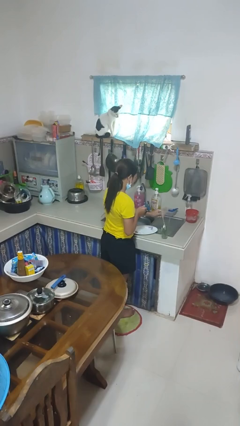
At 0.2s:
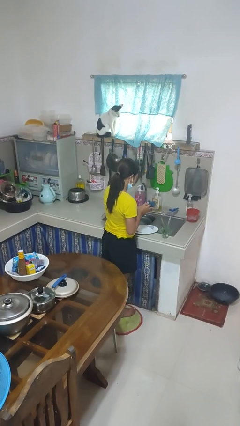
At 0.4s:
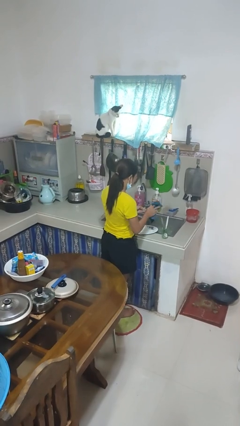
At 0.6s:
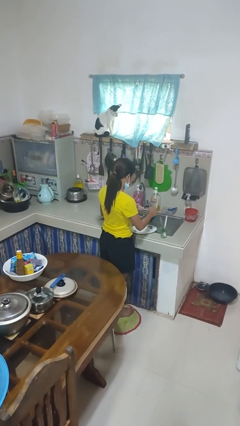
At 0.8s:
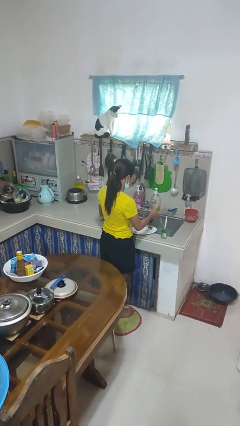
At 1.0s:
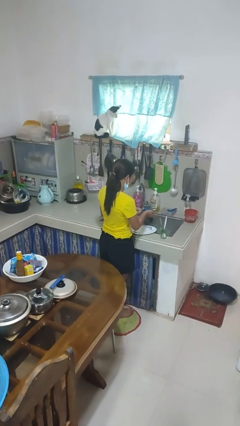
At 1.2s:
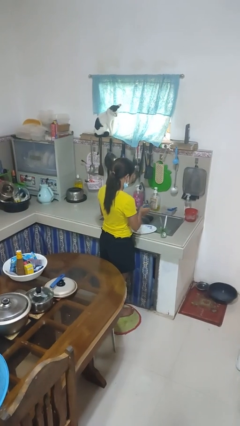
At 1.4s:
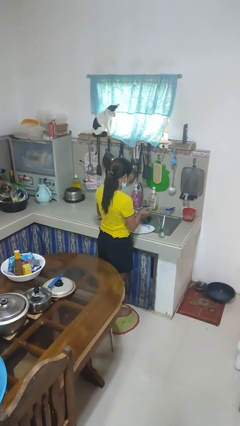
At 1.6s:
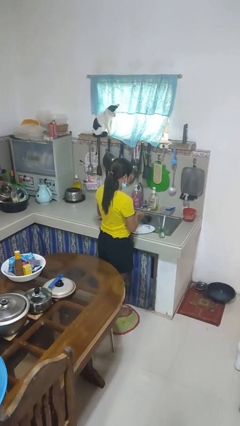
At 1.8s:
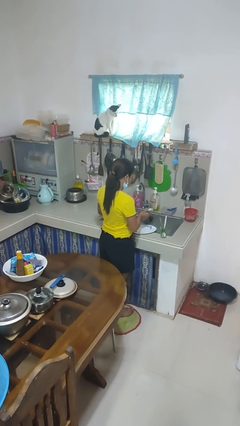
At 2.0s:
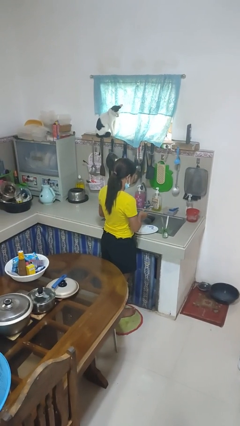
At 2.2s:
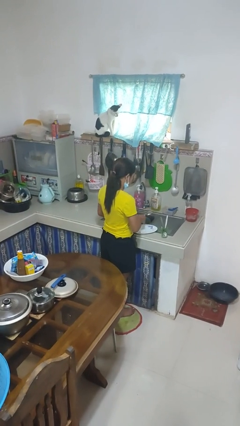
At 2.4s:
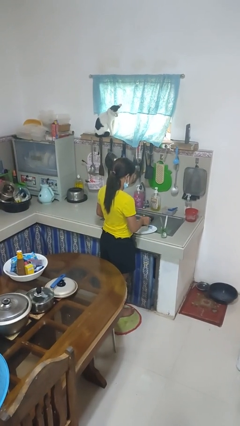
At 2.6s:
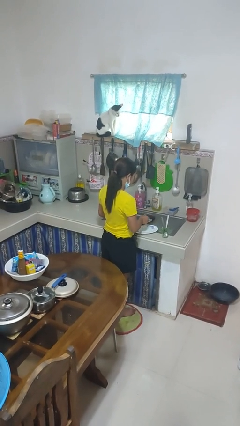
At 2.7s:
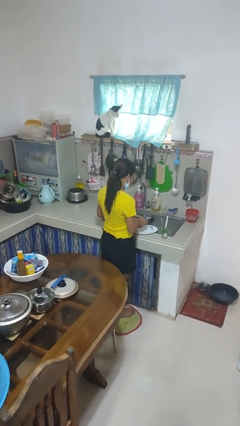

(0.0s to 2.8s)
person dries dish

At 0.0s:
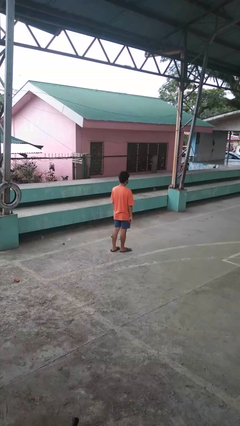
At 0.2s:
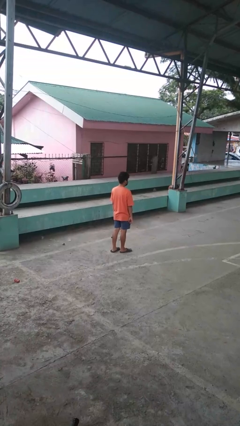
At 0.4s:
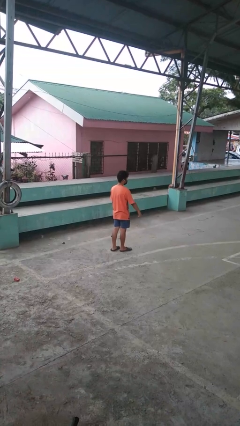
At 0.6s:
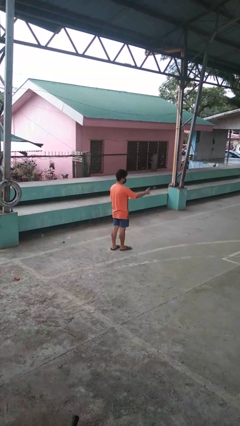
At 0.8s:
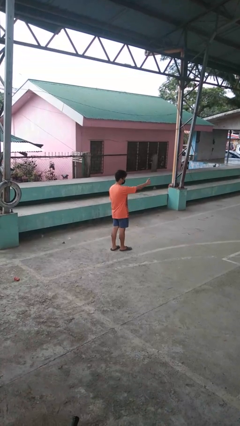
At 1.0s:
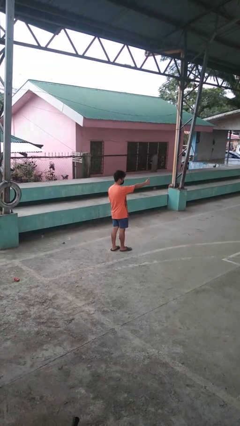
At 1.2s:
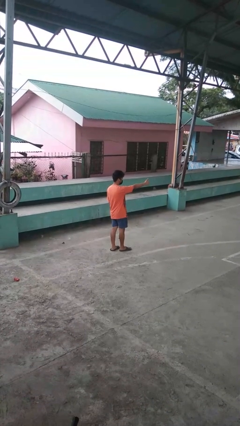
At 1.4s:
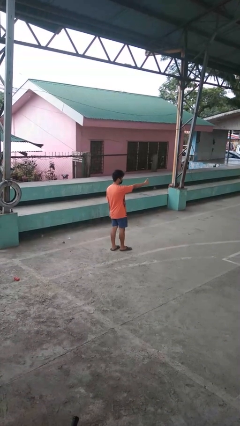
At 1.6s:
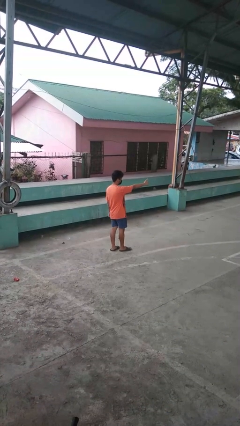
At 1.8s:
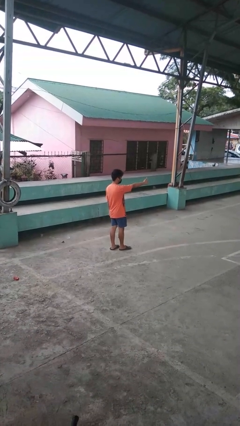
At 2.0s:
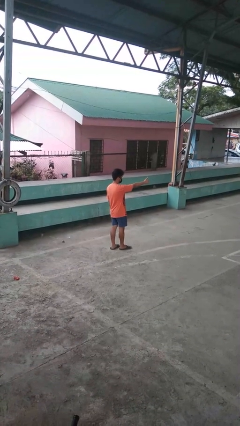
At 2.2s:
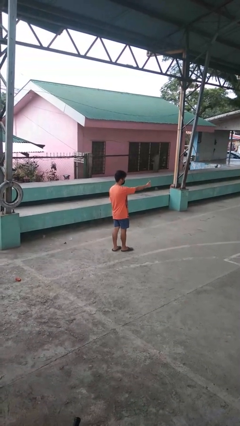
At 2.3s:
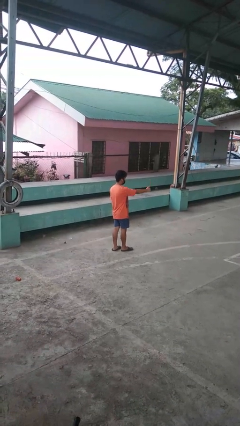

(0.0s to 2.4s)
person gestures thumbs up

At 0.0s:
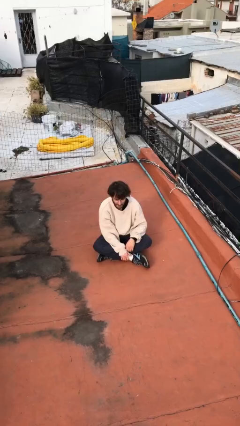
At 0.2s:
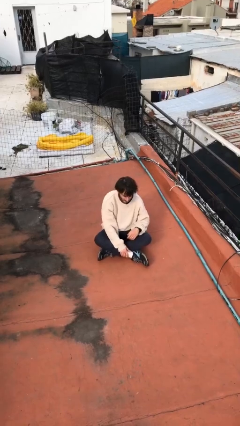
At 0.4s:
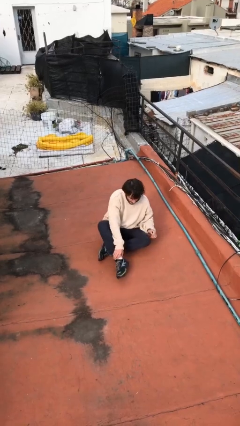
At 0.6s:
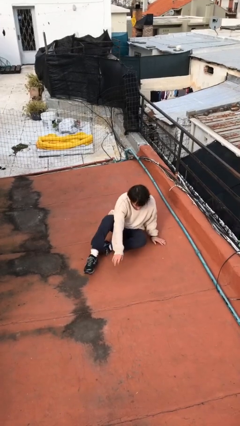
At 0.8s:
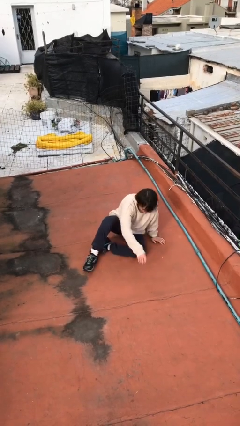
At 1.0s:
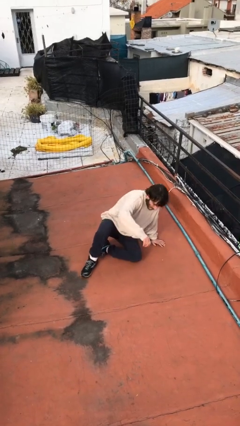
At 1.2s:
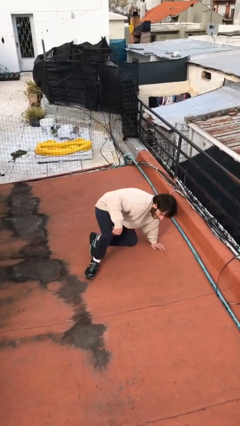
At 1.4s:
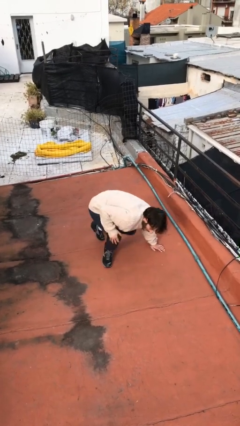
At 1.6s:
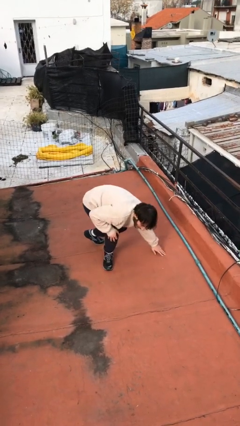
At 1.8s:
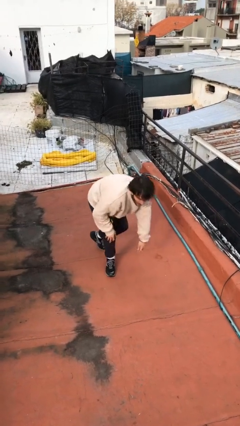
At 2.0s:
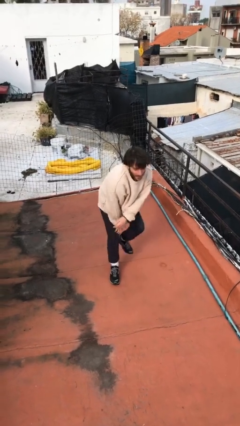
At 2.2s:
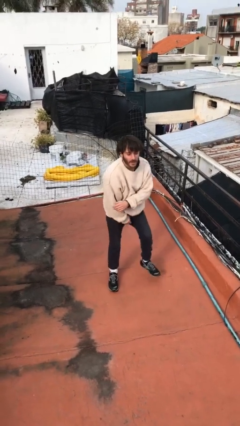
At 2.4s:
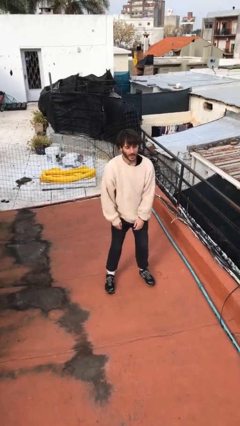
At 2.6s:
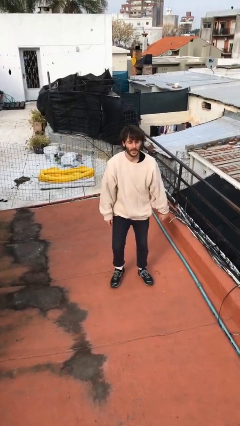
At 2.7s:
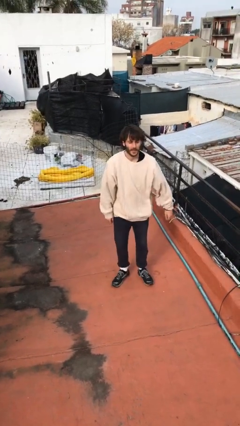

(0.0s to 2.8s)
person stands up from floor

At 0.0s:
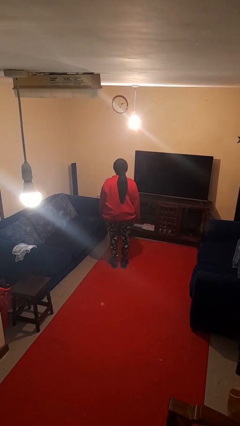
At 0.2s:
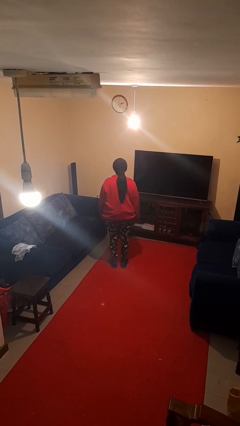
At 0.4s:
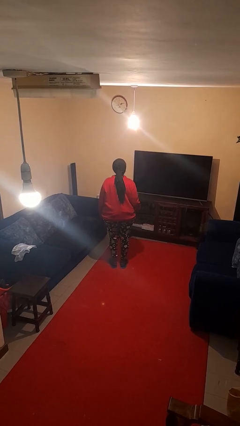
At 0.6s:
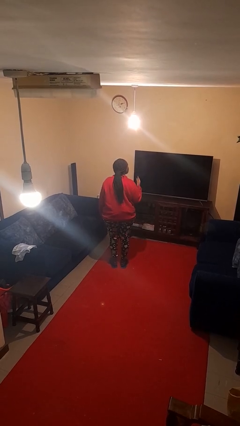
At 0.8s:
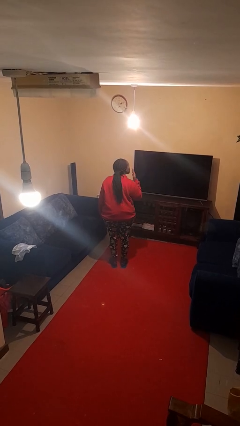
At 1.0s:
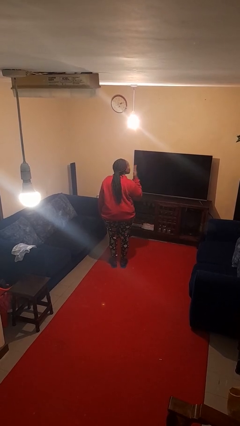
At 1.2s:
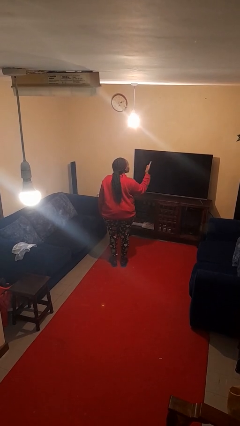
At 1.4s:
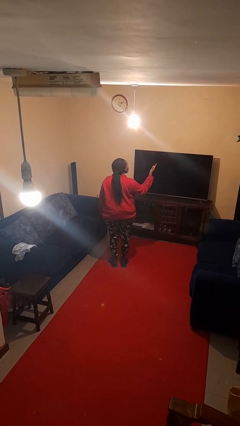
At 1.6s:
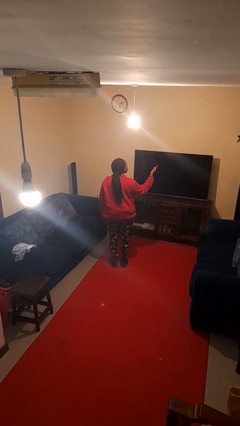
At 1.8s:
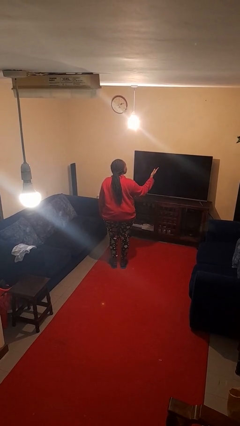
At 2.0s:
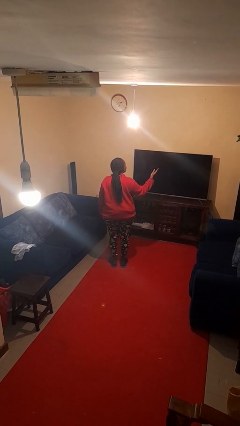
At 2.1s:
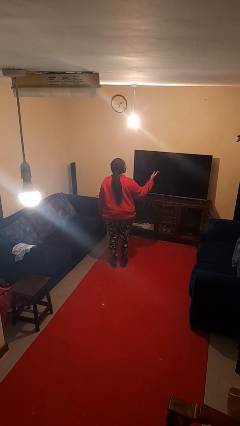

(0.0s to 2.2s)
person gestures blow kiss

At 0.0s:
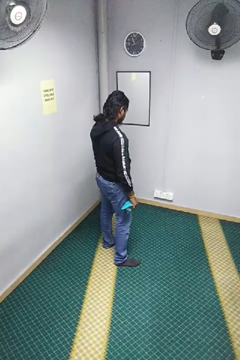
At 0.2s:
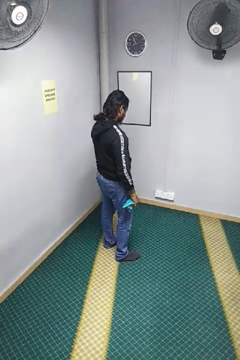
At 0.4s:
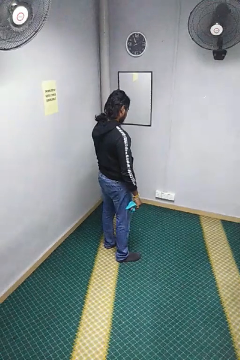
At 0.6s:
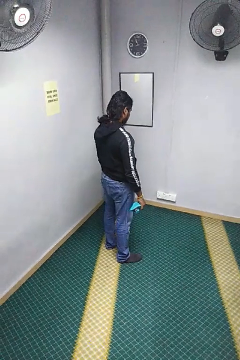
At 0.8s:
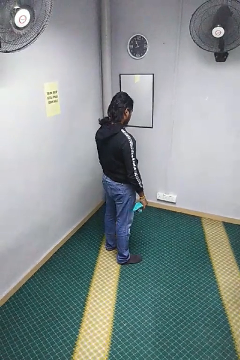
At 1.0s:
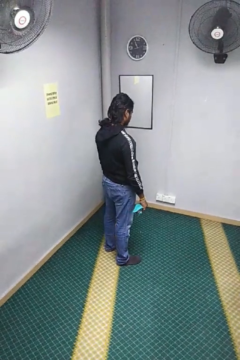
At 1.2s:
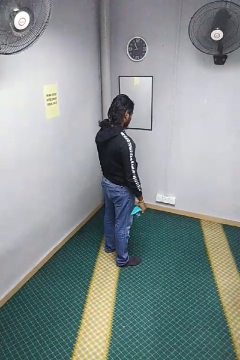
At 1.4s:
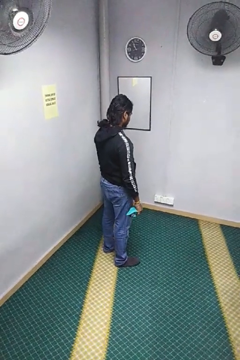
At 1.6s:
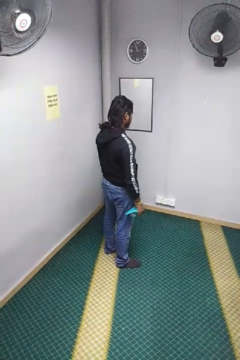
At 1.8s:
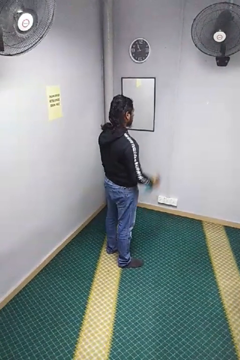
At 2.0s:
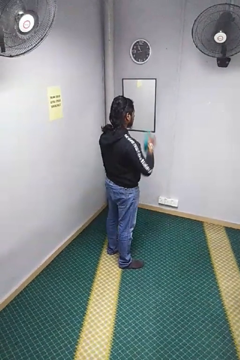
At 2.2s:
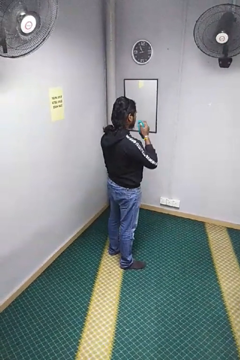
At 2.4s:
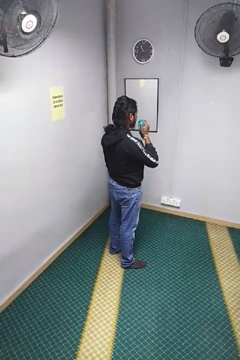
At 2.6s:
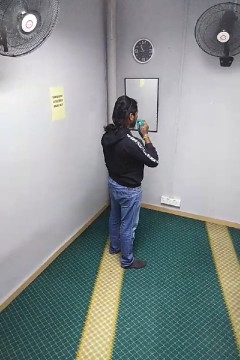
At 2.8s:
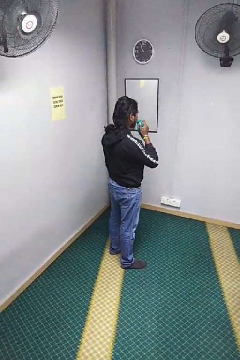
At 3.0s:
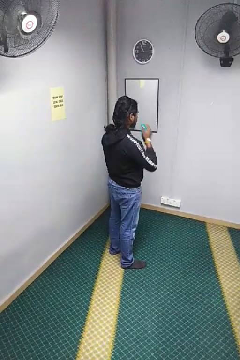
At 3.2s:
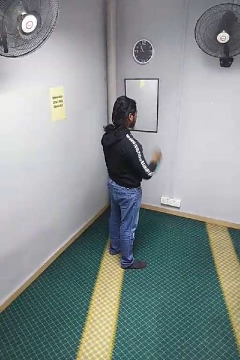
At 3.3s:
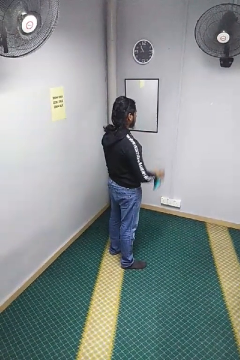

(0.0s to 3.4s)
person wipes mouth with napkin

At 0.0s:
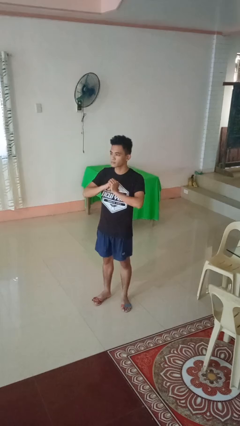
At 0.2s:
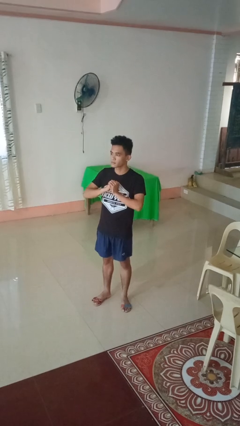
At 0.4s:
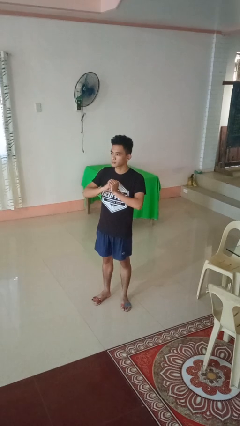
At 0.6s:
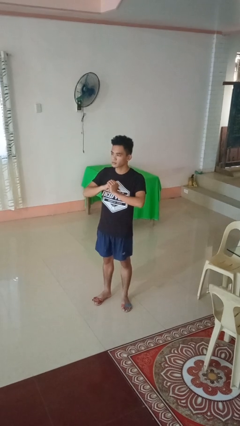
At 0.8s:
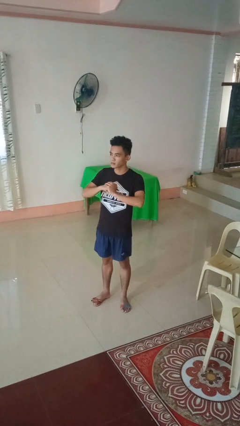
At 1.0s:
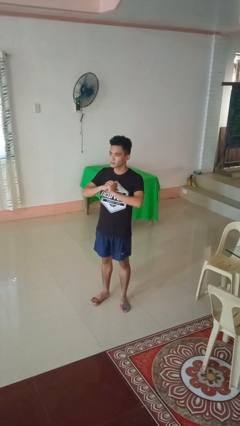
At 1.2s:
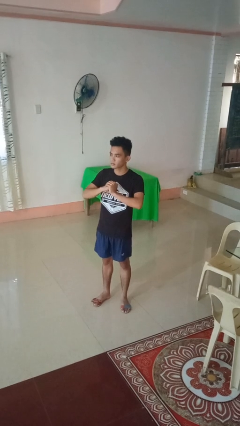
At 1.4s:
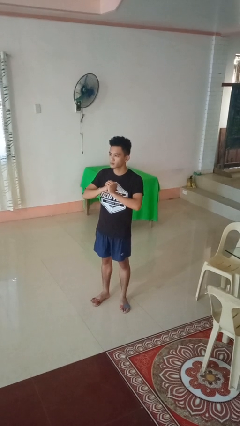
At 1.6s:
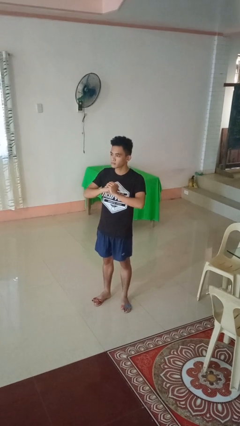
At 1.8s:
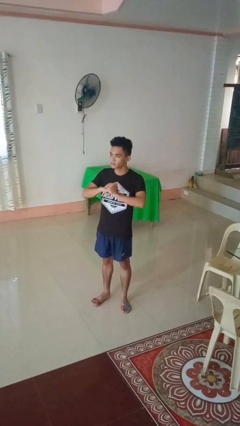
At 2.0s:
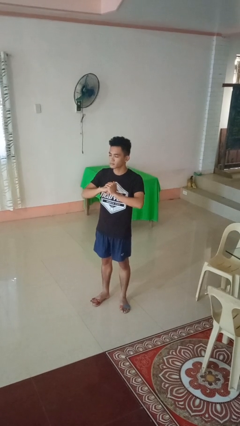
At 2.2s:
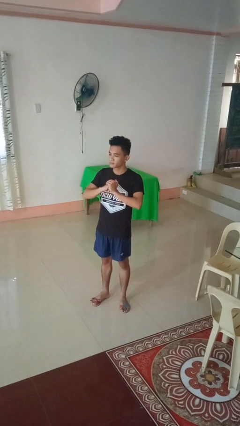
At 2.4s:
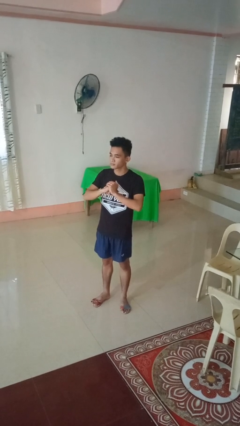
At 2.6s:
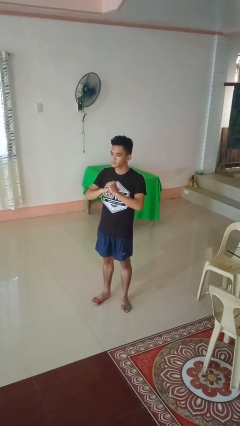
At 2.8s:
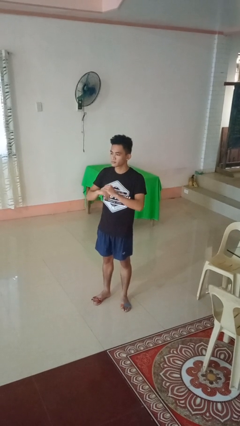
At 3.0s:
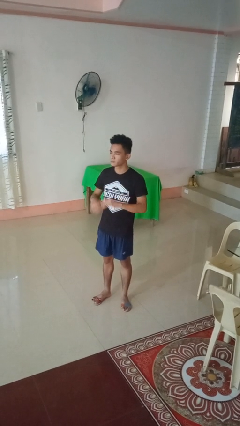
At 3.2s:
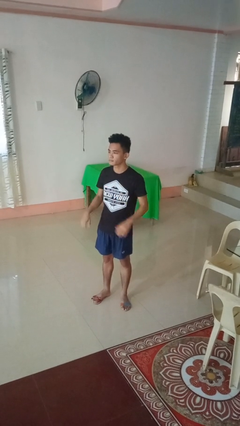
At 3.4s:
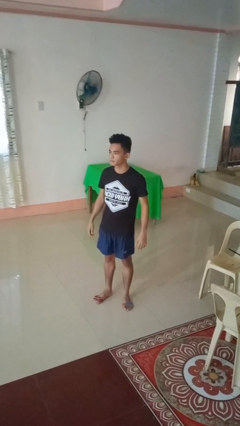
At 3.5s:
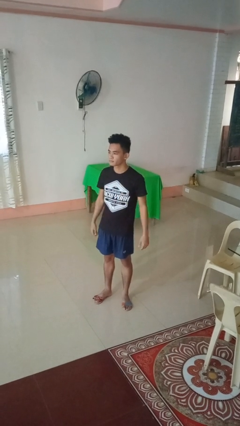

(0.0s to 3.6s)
person cracks knuckles

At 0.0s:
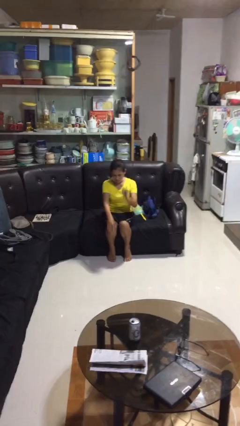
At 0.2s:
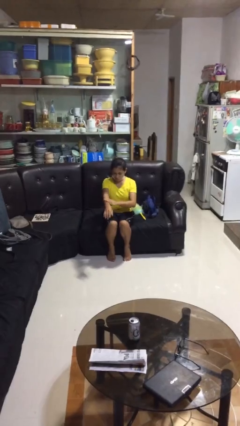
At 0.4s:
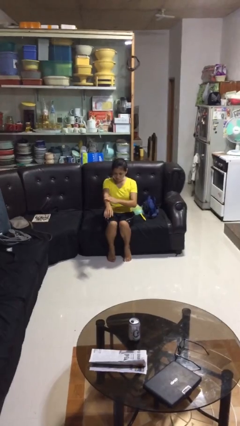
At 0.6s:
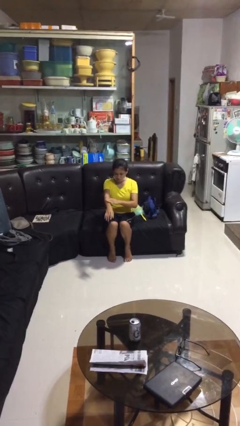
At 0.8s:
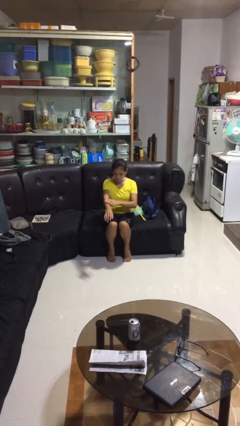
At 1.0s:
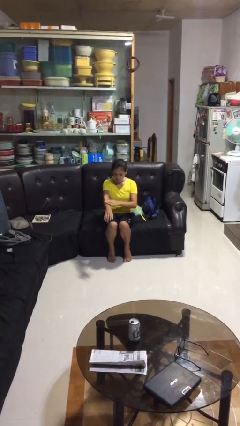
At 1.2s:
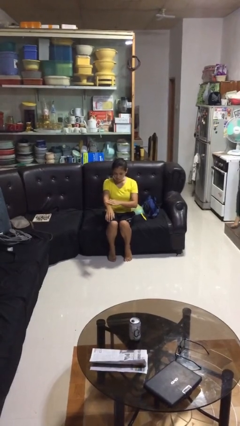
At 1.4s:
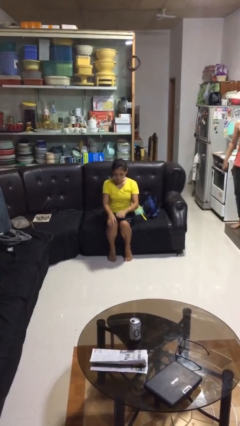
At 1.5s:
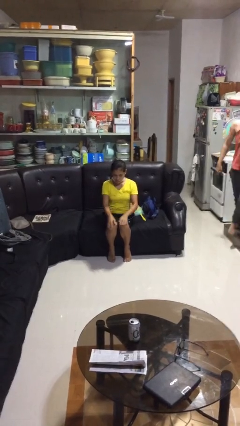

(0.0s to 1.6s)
person swats bug
